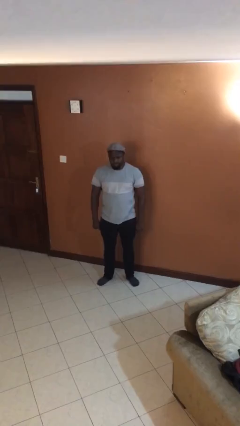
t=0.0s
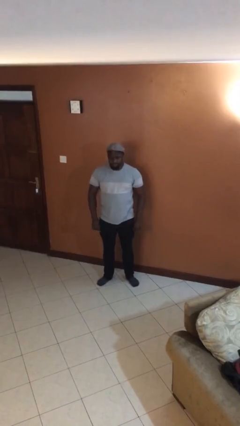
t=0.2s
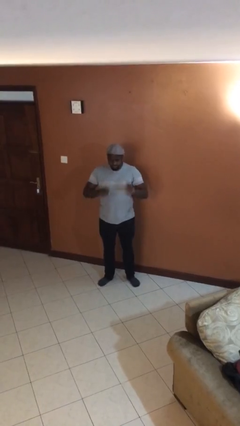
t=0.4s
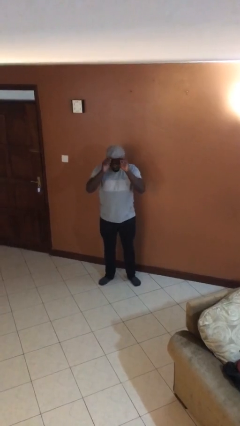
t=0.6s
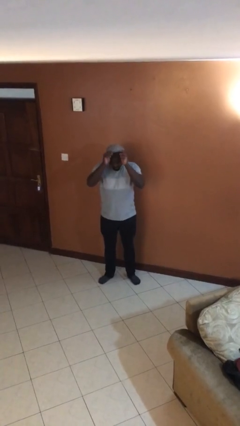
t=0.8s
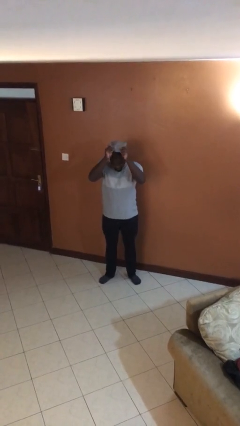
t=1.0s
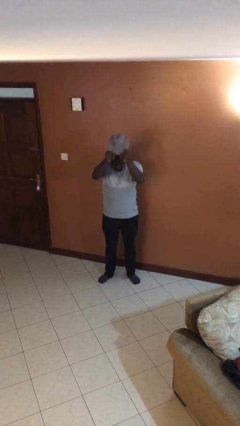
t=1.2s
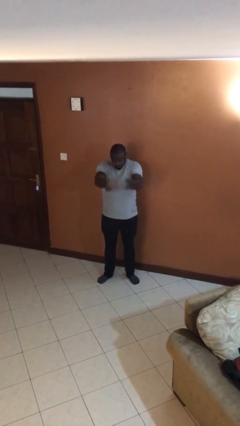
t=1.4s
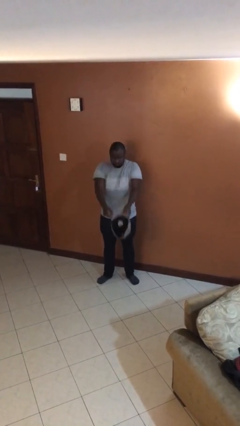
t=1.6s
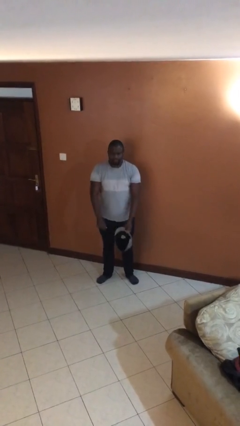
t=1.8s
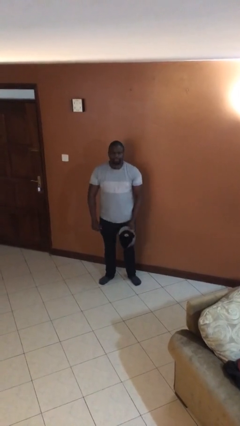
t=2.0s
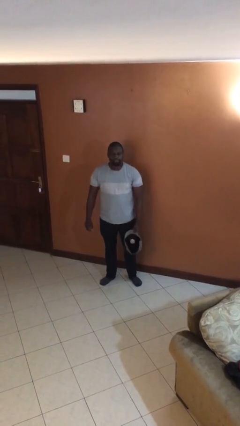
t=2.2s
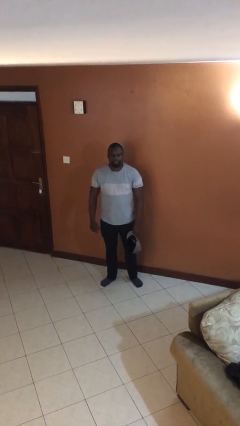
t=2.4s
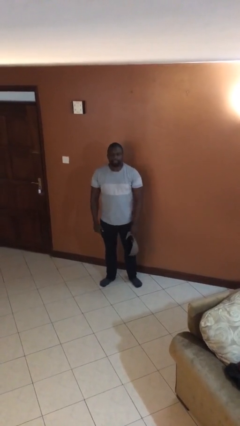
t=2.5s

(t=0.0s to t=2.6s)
person takes off hat

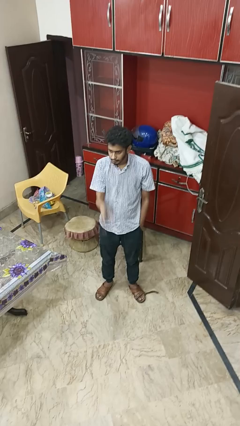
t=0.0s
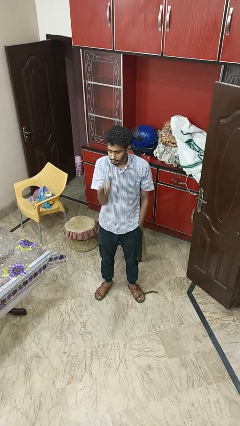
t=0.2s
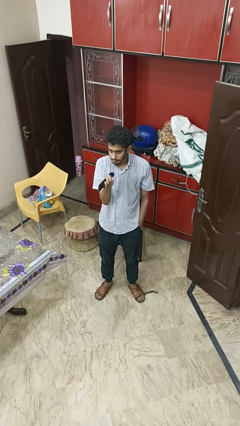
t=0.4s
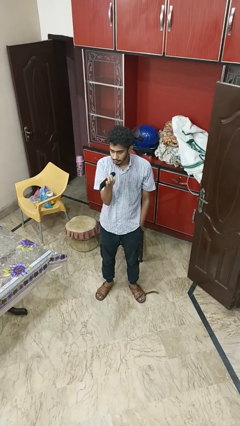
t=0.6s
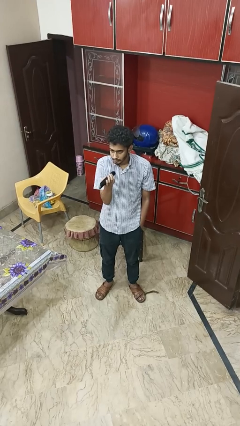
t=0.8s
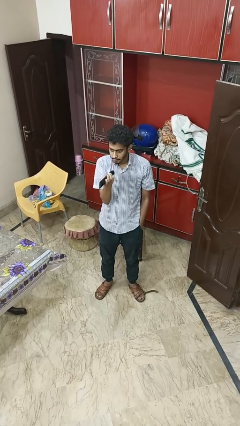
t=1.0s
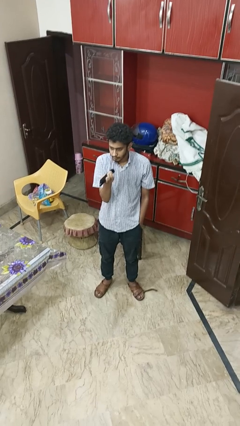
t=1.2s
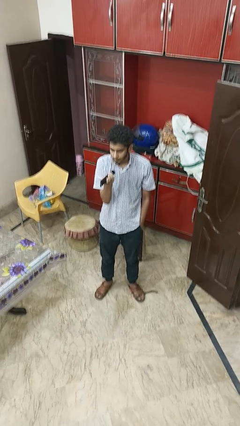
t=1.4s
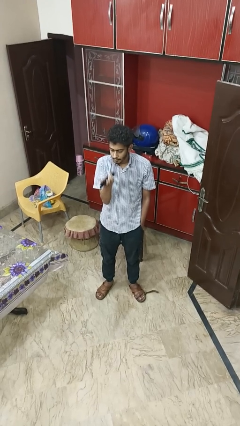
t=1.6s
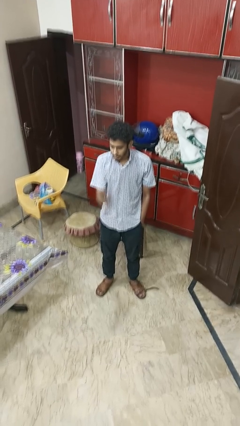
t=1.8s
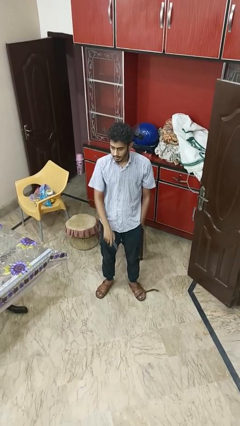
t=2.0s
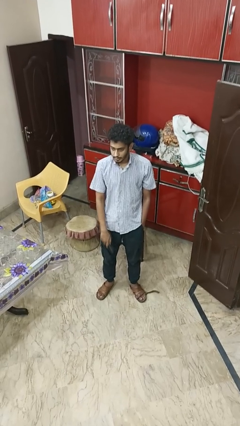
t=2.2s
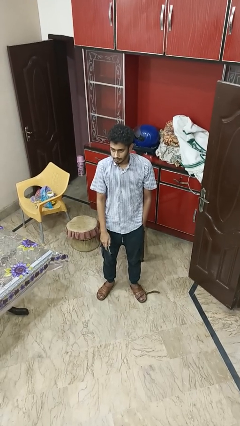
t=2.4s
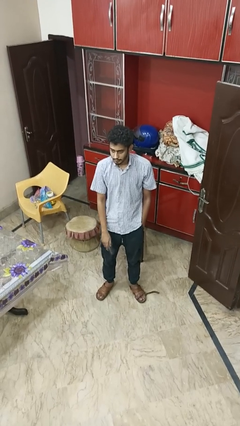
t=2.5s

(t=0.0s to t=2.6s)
person uses television remote

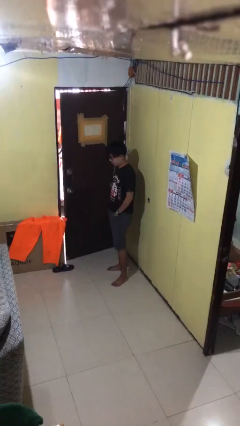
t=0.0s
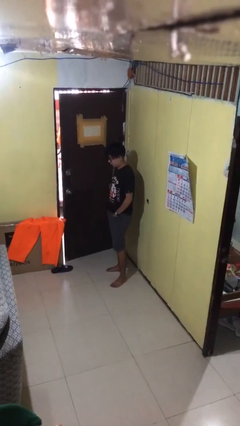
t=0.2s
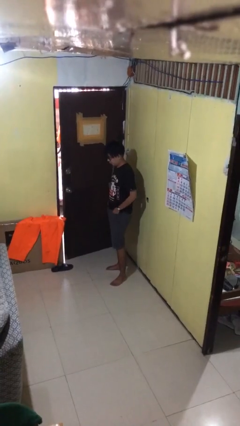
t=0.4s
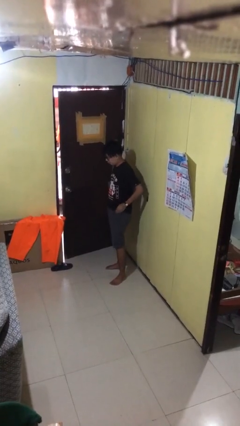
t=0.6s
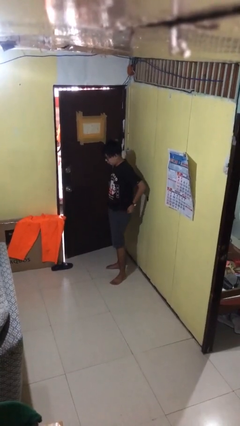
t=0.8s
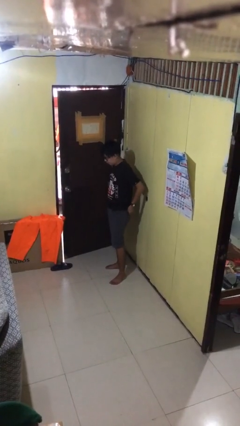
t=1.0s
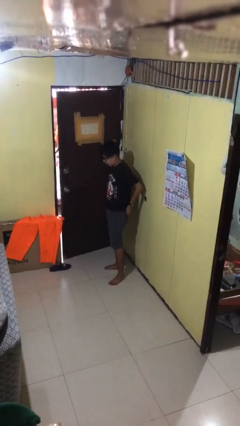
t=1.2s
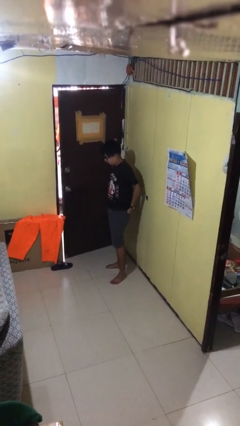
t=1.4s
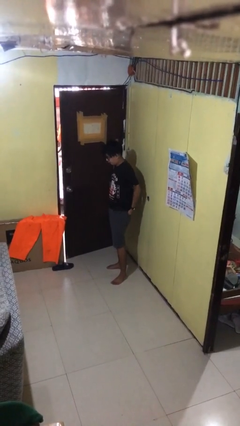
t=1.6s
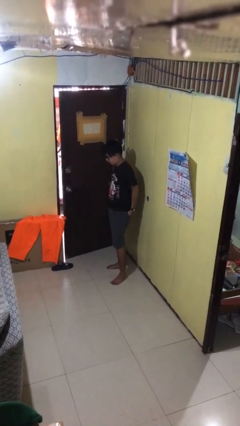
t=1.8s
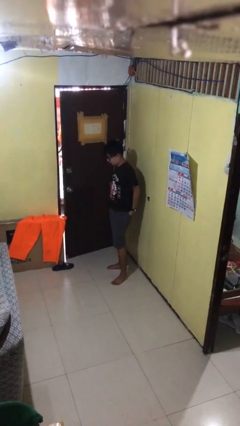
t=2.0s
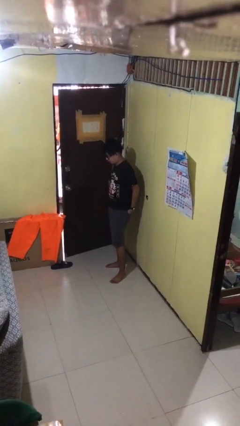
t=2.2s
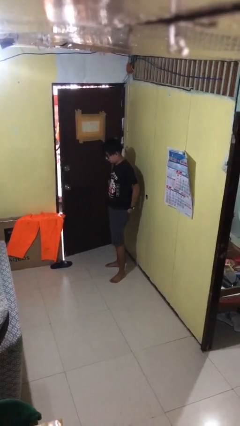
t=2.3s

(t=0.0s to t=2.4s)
person puts hands in back pockets

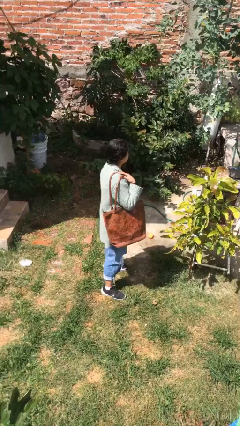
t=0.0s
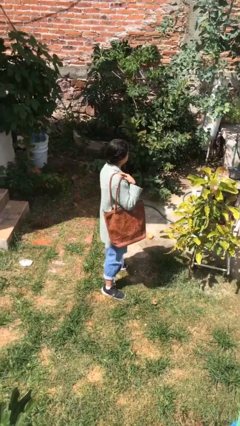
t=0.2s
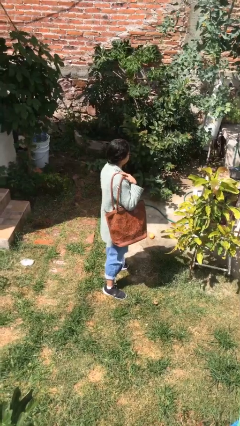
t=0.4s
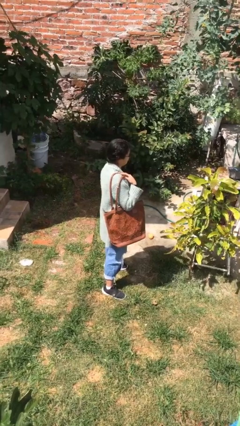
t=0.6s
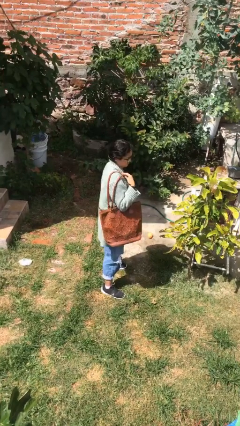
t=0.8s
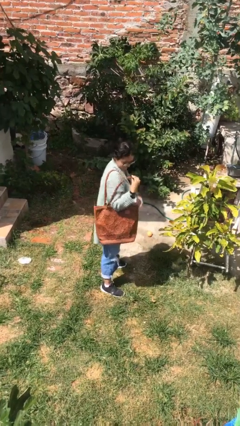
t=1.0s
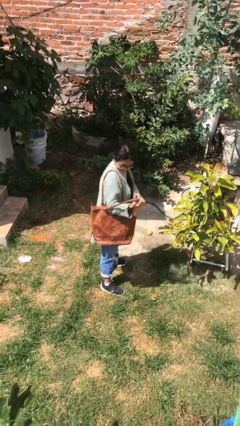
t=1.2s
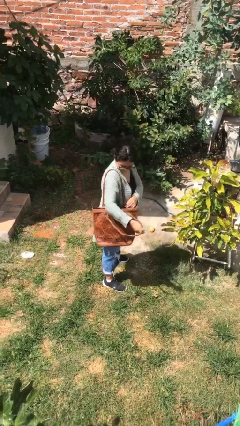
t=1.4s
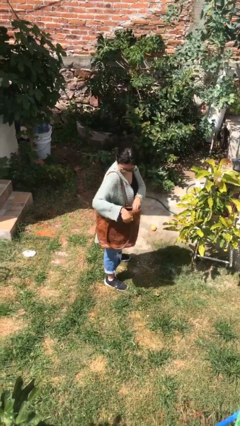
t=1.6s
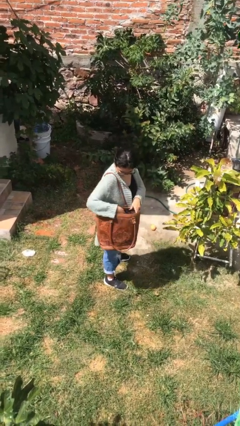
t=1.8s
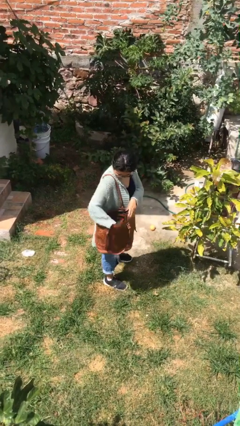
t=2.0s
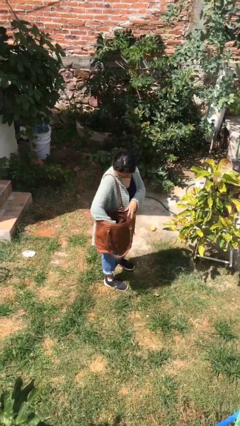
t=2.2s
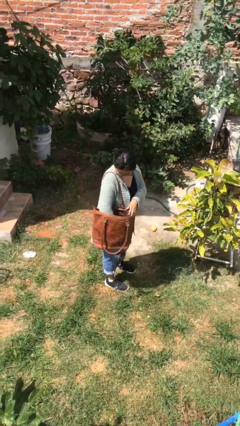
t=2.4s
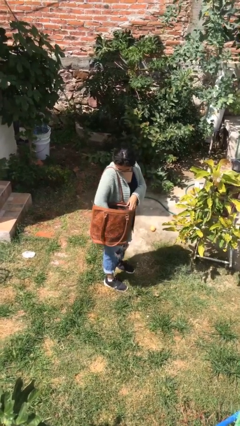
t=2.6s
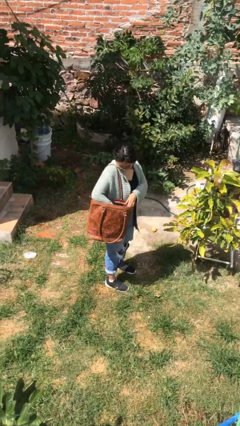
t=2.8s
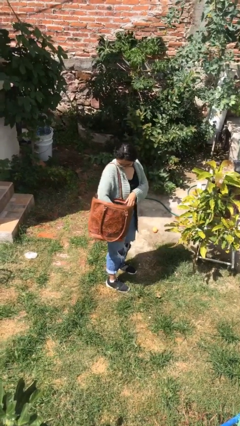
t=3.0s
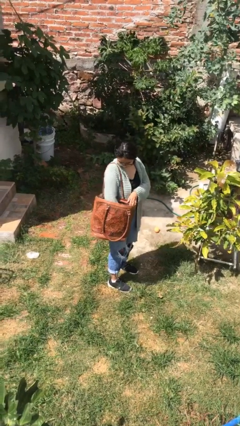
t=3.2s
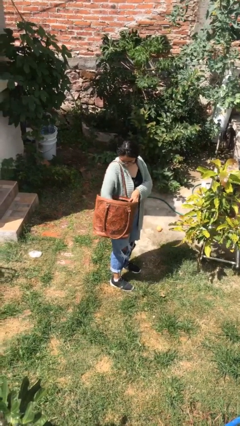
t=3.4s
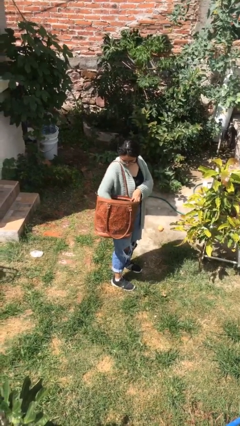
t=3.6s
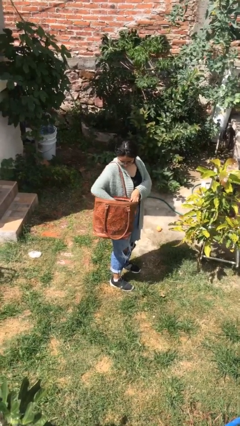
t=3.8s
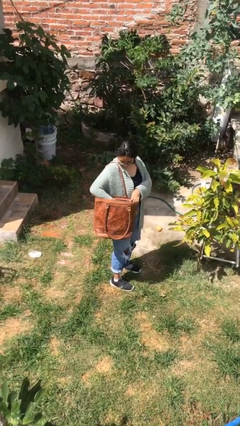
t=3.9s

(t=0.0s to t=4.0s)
person searches in purse

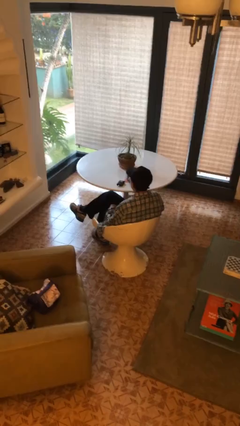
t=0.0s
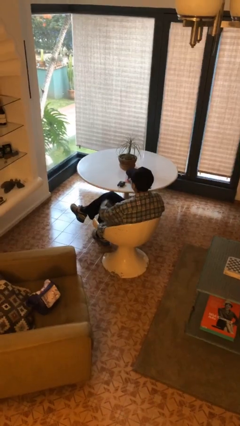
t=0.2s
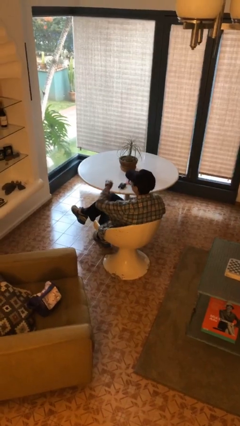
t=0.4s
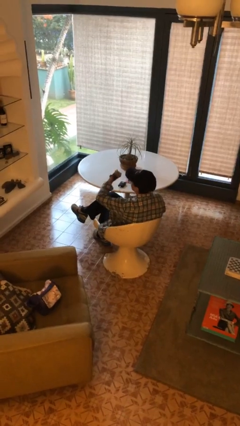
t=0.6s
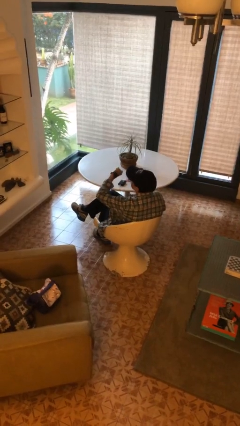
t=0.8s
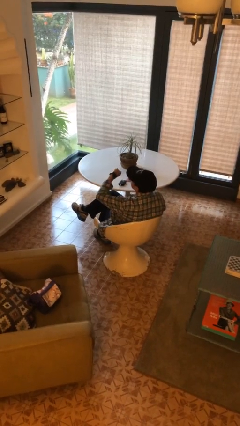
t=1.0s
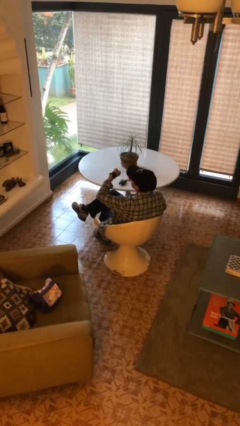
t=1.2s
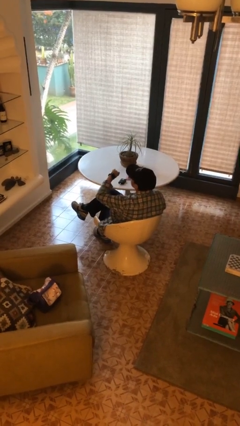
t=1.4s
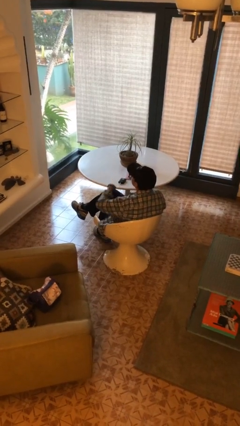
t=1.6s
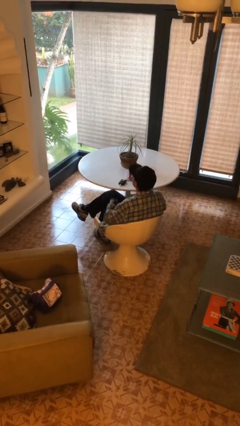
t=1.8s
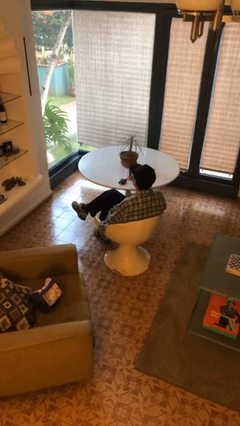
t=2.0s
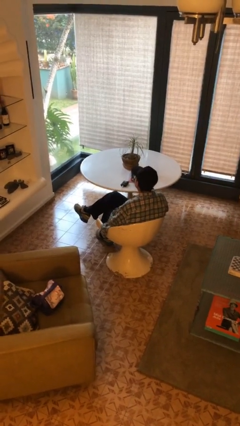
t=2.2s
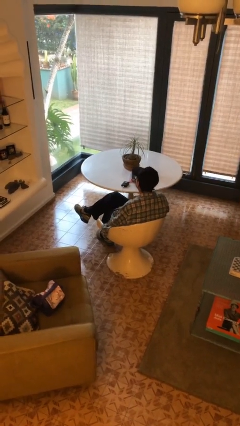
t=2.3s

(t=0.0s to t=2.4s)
person looks at wristwatch

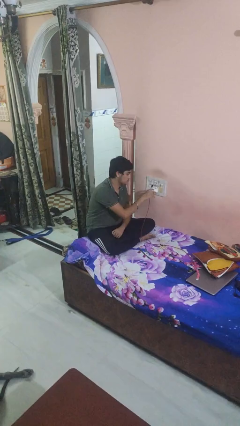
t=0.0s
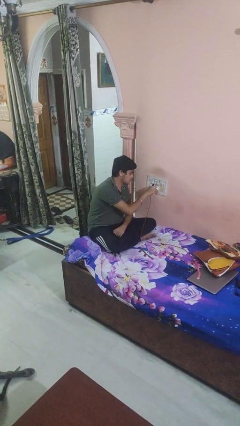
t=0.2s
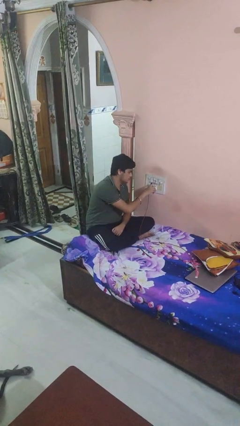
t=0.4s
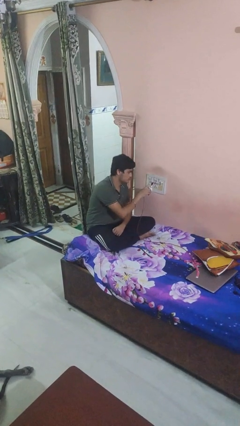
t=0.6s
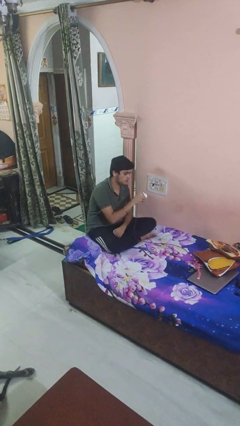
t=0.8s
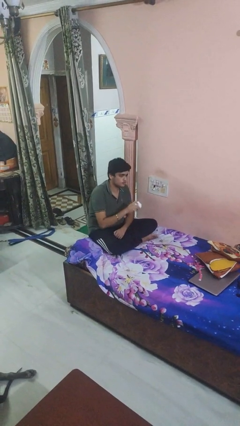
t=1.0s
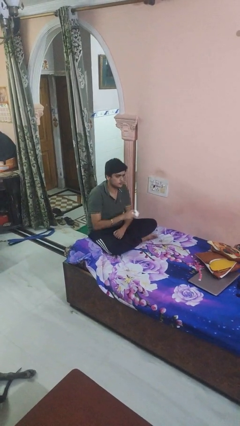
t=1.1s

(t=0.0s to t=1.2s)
person unplugs from electrical socket

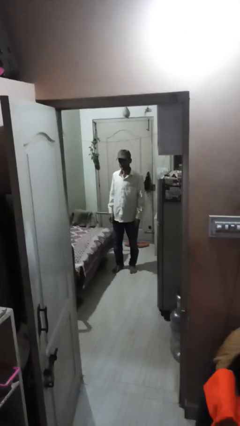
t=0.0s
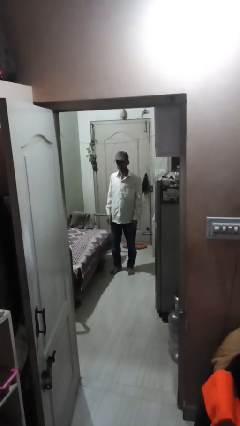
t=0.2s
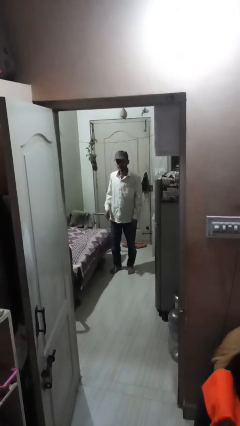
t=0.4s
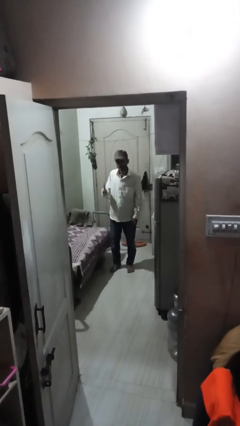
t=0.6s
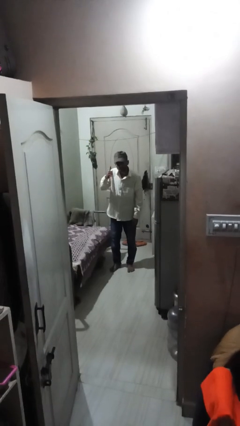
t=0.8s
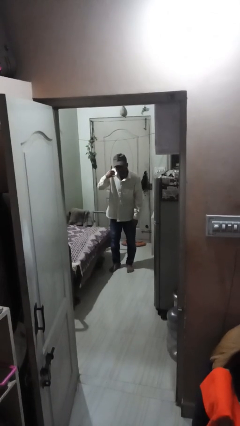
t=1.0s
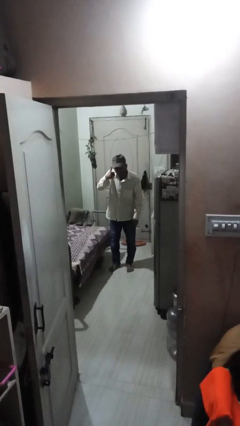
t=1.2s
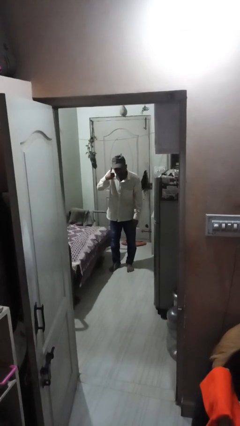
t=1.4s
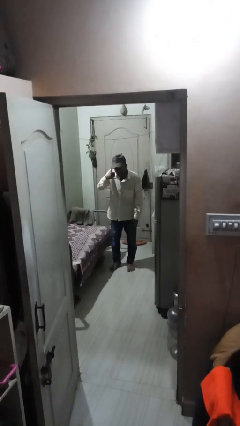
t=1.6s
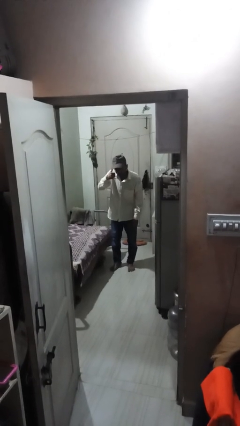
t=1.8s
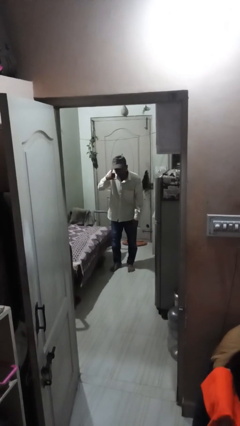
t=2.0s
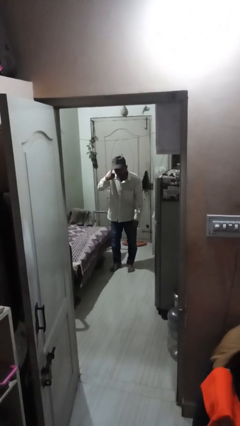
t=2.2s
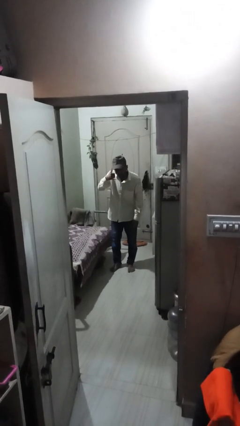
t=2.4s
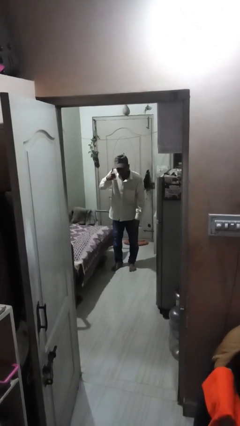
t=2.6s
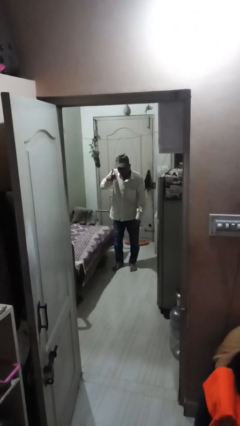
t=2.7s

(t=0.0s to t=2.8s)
person gestures call me
